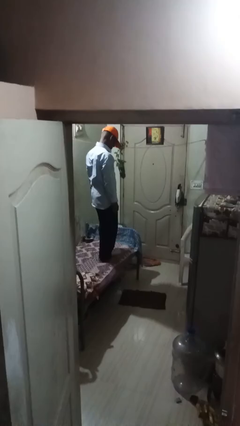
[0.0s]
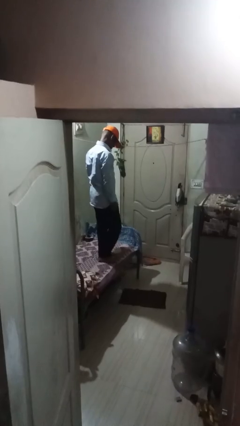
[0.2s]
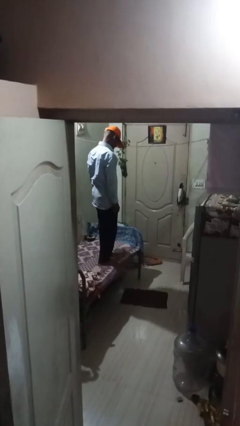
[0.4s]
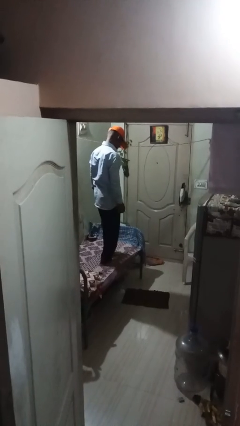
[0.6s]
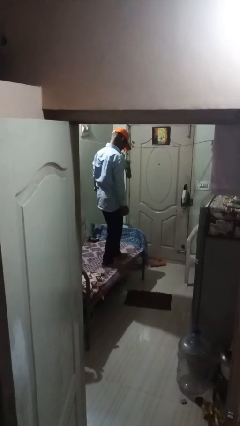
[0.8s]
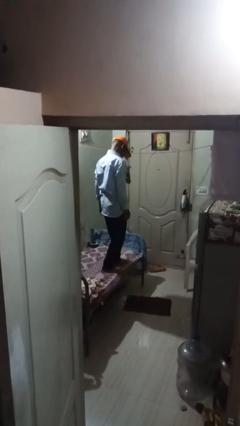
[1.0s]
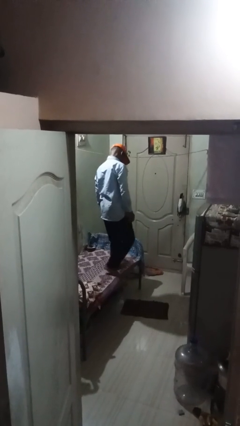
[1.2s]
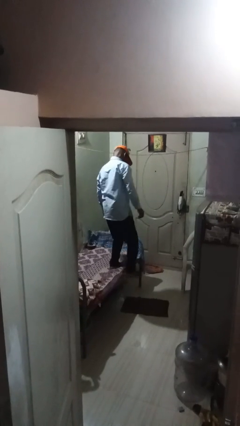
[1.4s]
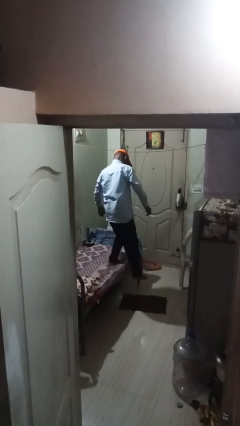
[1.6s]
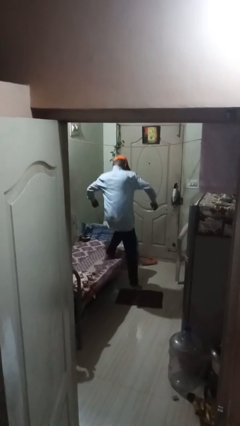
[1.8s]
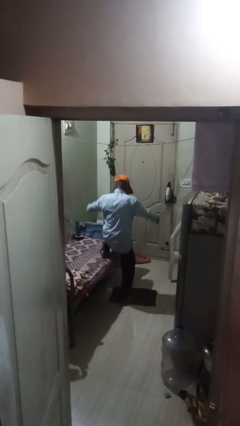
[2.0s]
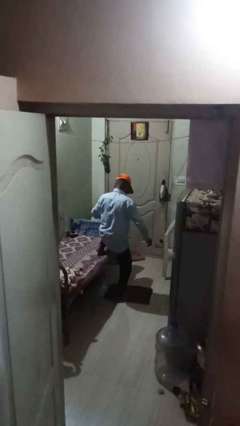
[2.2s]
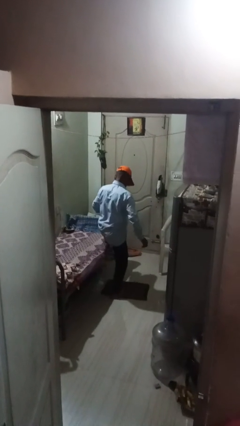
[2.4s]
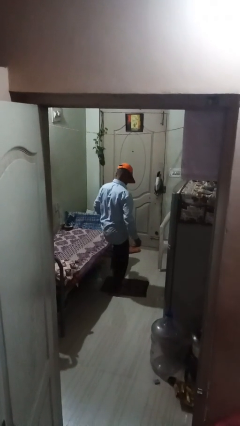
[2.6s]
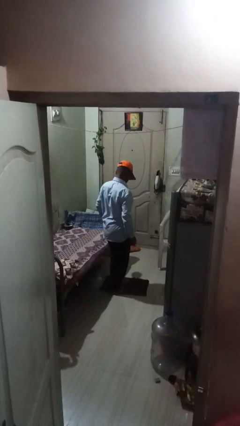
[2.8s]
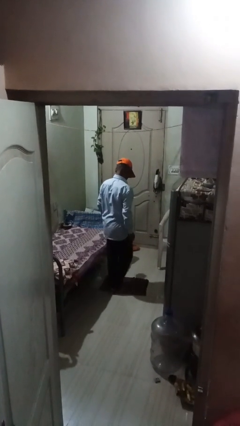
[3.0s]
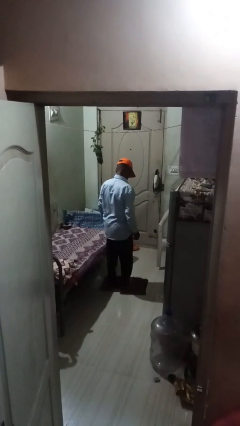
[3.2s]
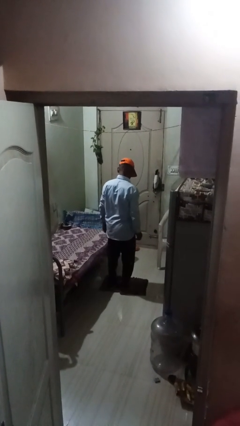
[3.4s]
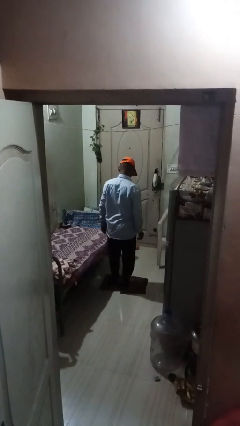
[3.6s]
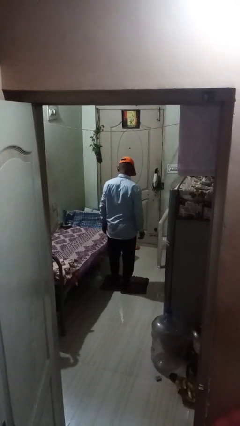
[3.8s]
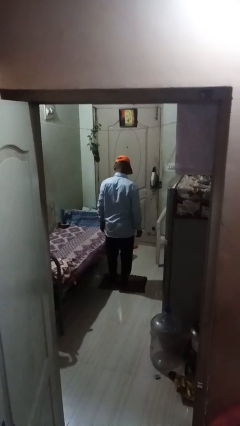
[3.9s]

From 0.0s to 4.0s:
person climbs off couch

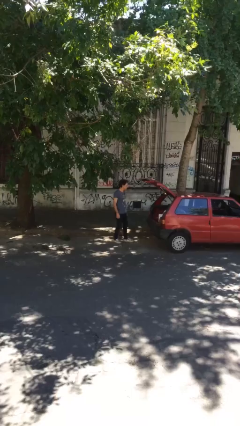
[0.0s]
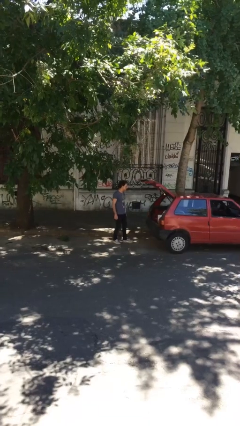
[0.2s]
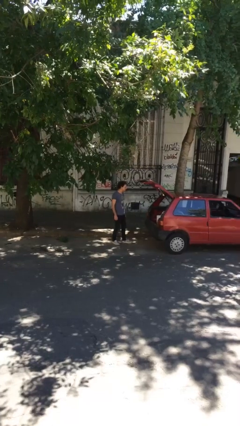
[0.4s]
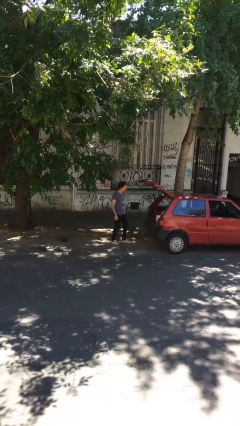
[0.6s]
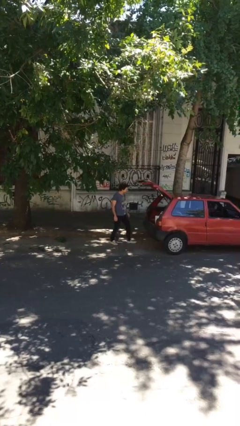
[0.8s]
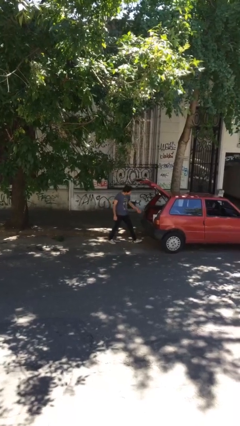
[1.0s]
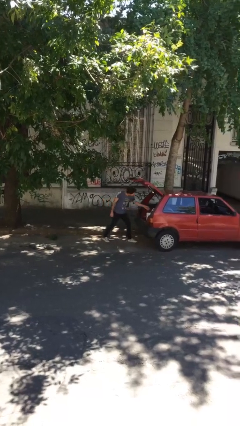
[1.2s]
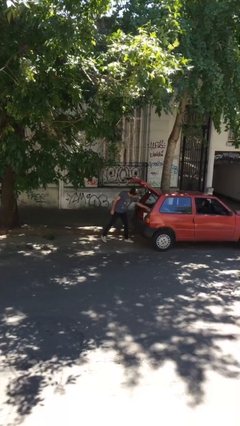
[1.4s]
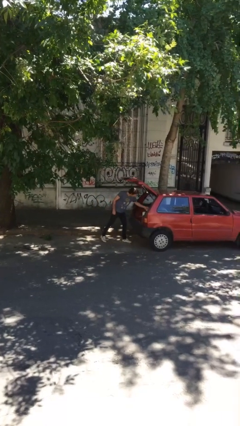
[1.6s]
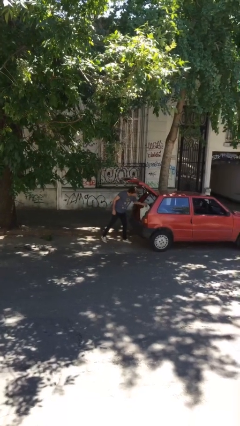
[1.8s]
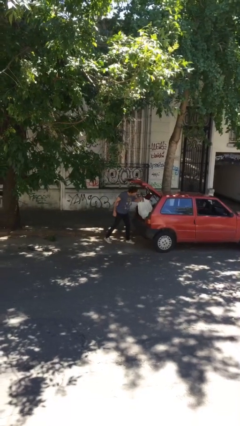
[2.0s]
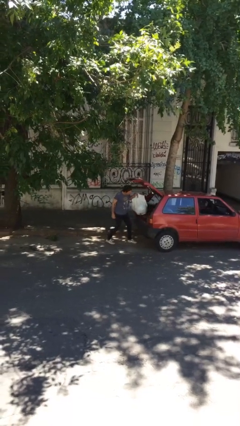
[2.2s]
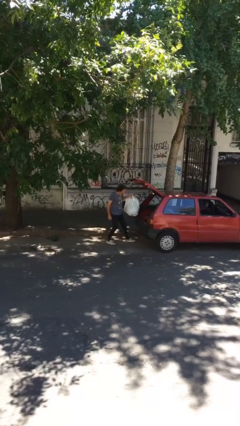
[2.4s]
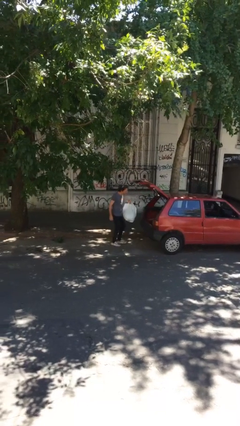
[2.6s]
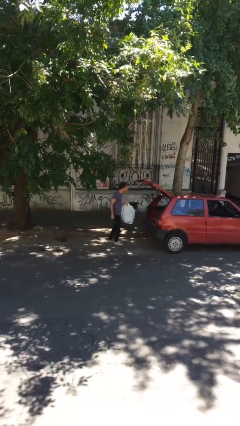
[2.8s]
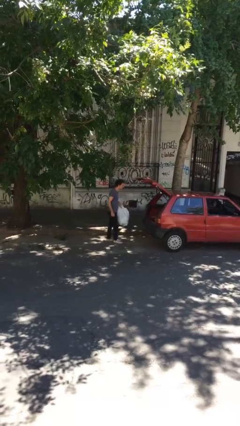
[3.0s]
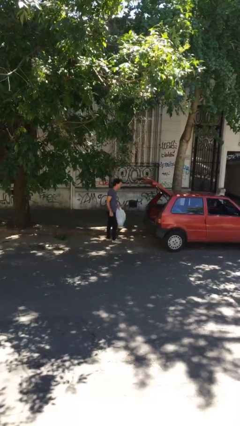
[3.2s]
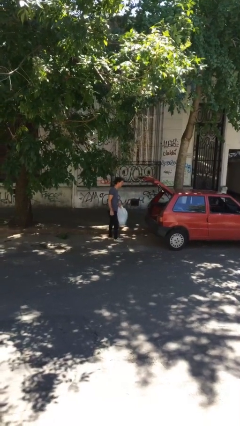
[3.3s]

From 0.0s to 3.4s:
person unloads car

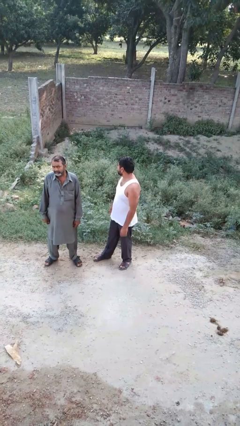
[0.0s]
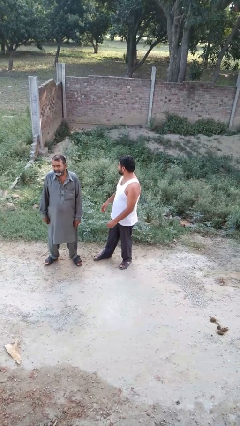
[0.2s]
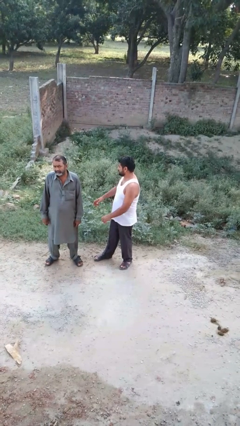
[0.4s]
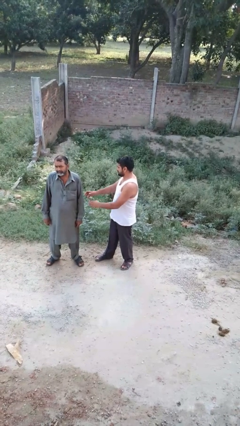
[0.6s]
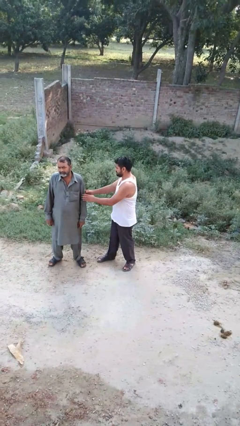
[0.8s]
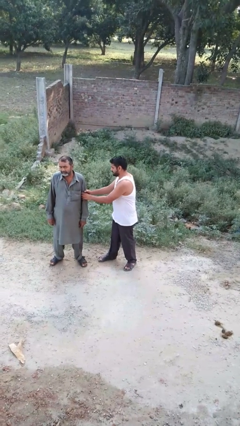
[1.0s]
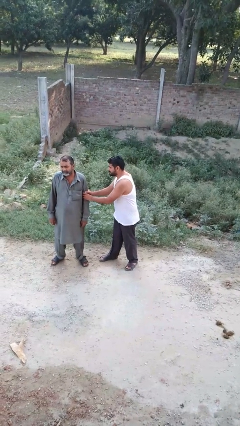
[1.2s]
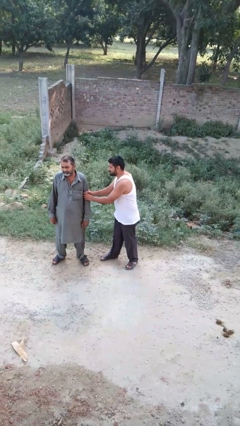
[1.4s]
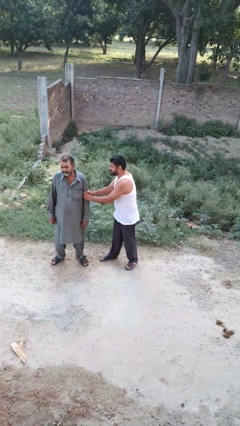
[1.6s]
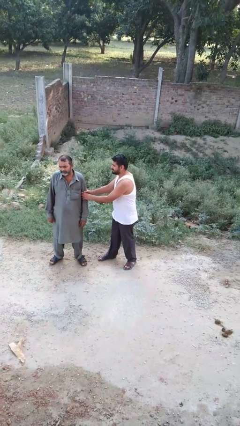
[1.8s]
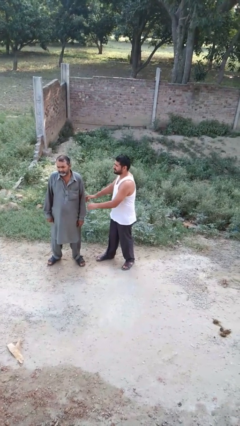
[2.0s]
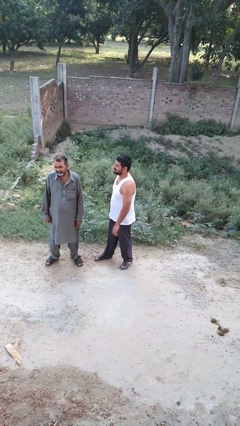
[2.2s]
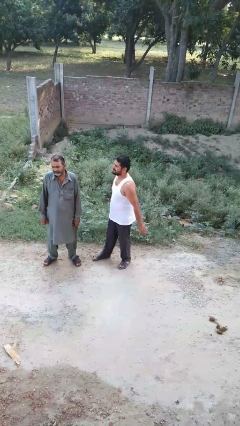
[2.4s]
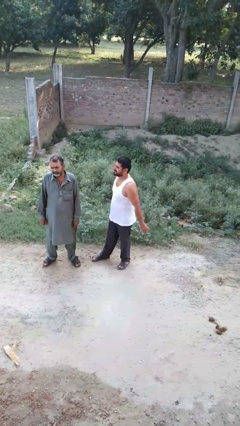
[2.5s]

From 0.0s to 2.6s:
person grabs person by forearm

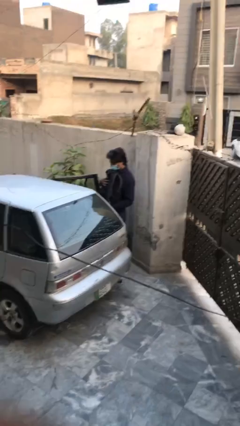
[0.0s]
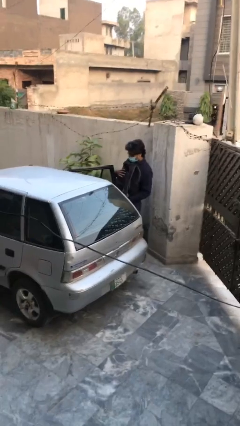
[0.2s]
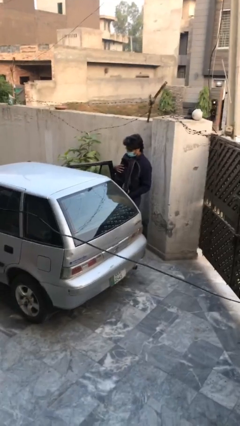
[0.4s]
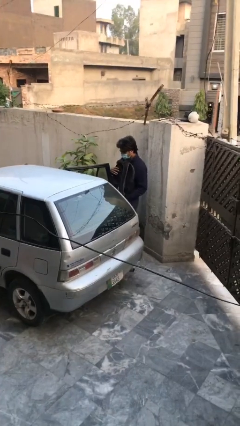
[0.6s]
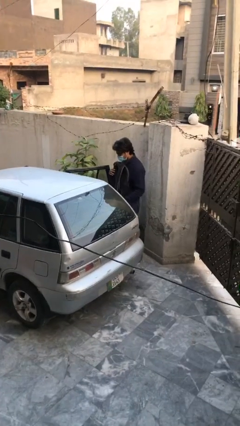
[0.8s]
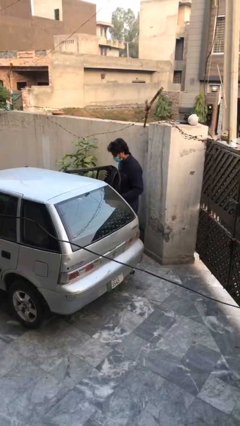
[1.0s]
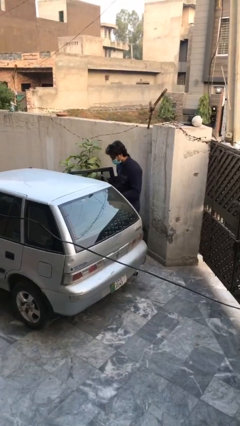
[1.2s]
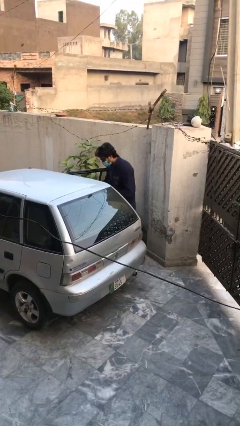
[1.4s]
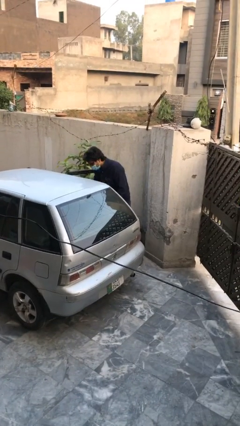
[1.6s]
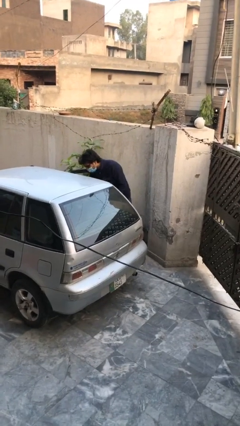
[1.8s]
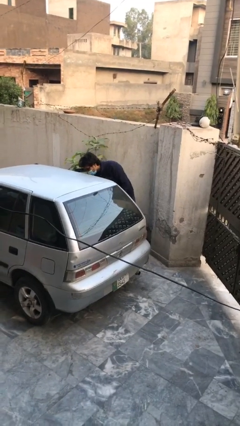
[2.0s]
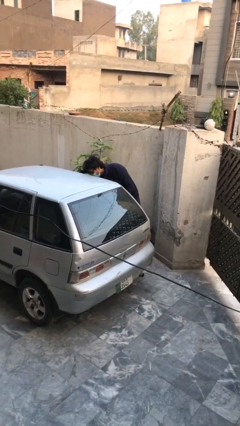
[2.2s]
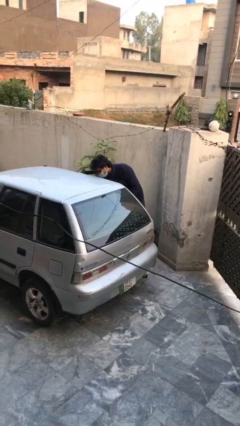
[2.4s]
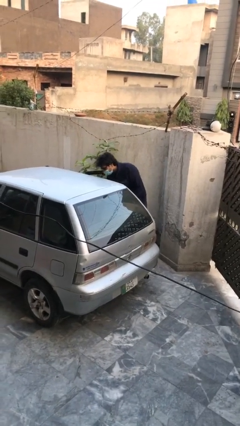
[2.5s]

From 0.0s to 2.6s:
person loads car

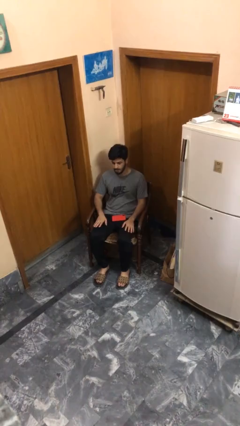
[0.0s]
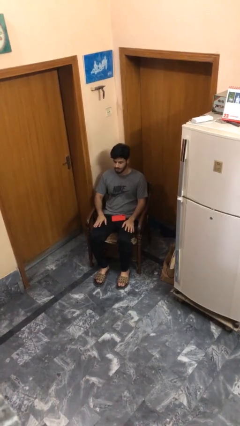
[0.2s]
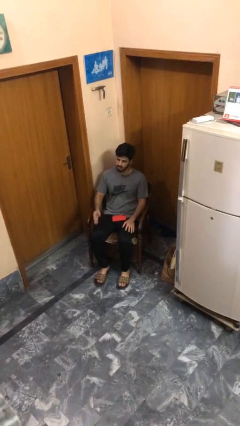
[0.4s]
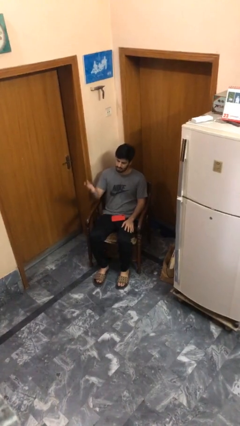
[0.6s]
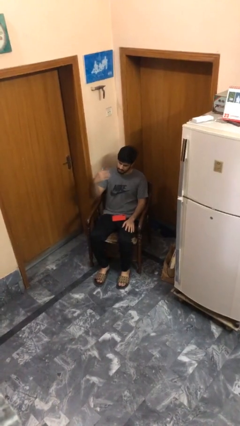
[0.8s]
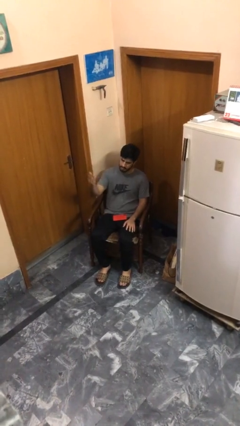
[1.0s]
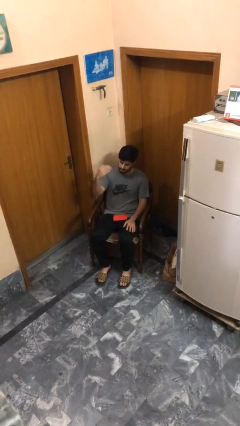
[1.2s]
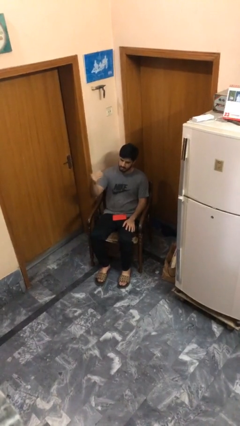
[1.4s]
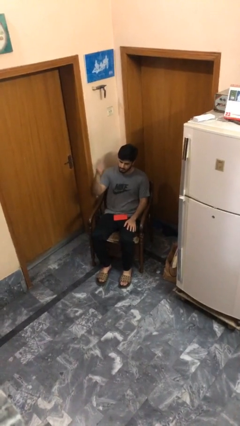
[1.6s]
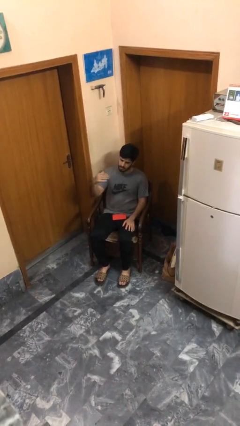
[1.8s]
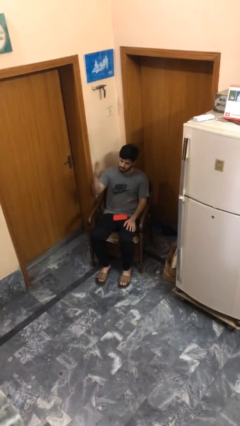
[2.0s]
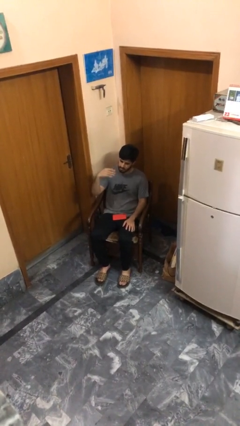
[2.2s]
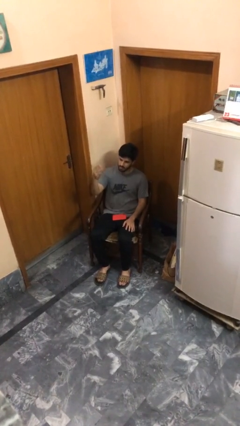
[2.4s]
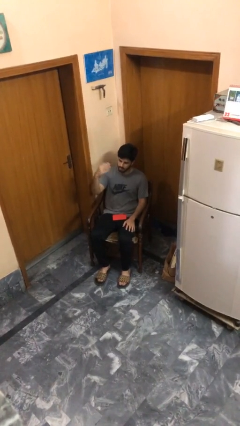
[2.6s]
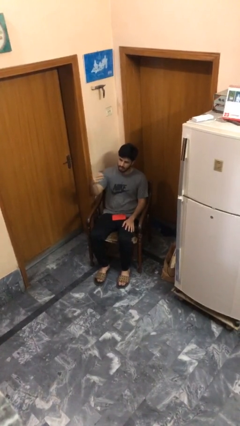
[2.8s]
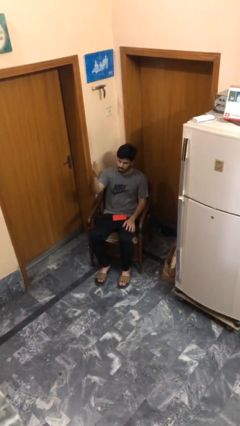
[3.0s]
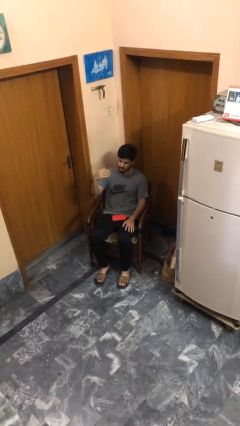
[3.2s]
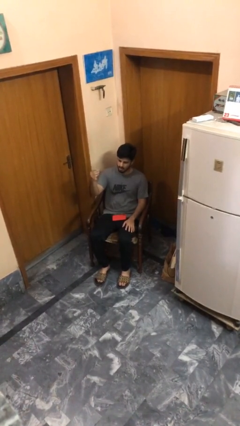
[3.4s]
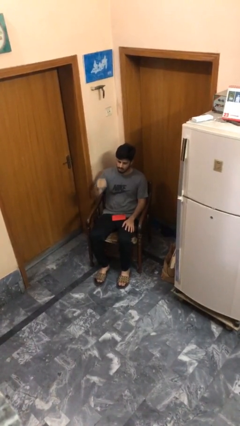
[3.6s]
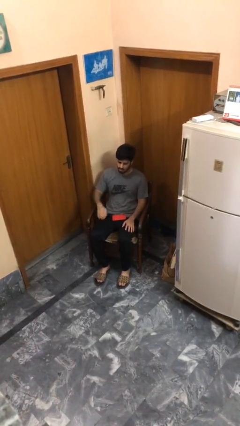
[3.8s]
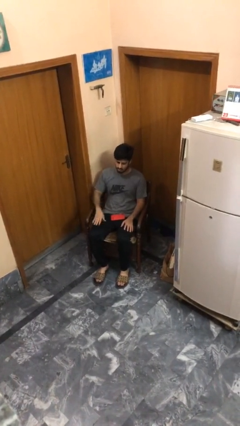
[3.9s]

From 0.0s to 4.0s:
person gestures come here

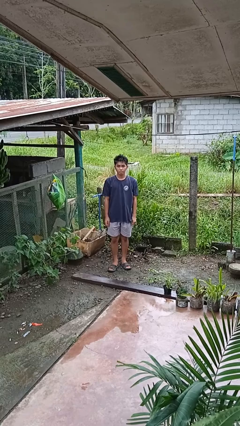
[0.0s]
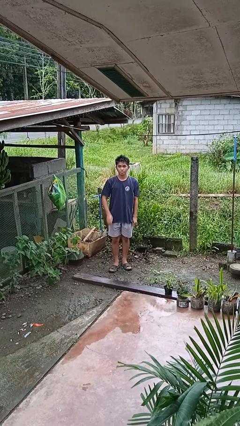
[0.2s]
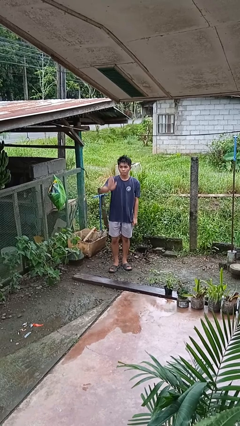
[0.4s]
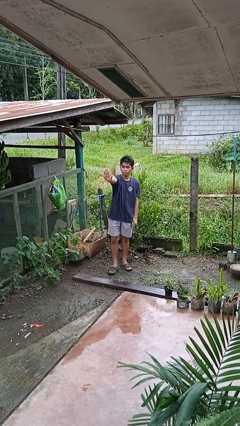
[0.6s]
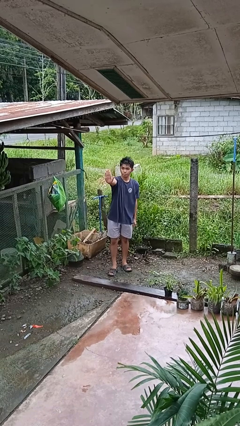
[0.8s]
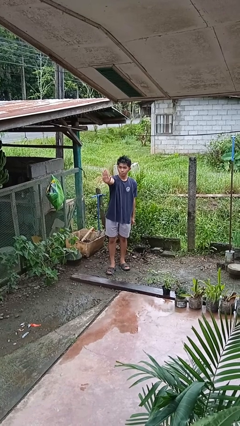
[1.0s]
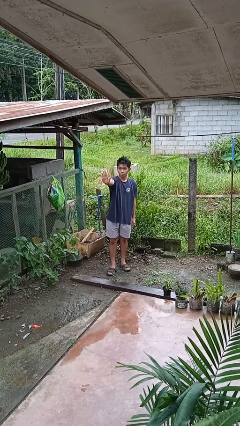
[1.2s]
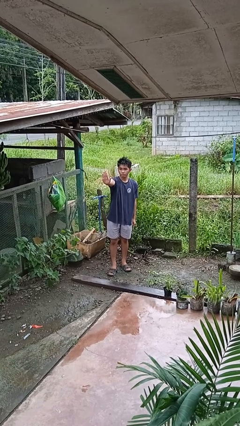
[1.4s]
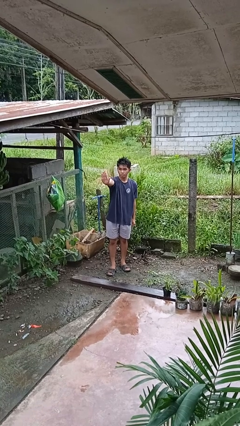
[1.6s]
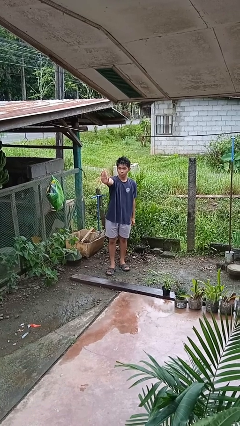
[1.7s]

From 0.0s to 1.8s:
person gestures stop
